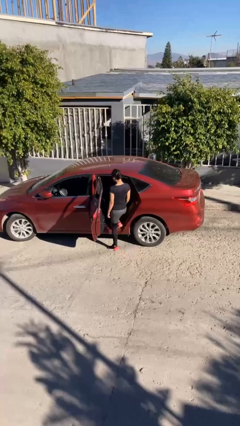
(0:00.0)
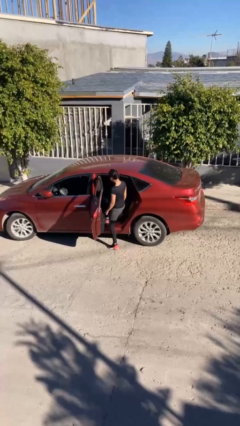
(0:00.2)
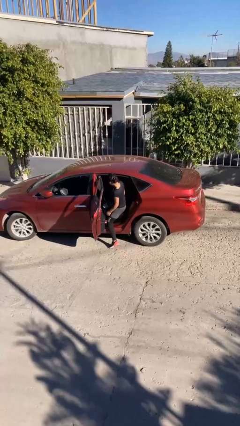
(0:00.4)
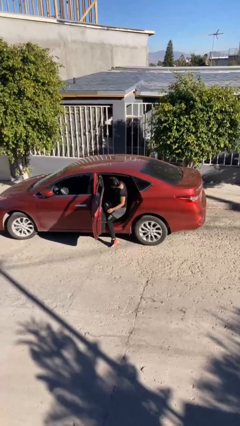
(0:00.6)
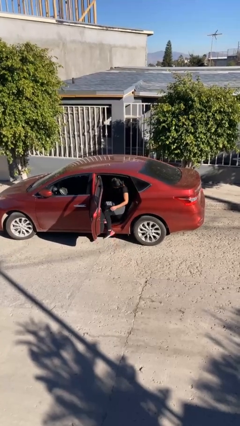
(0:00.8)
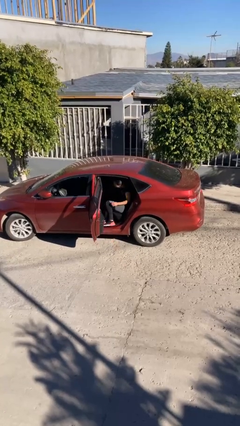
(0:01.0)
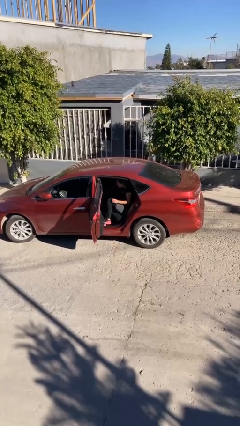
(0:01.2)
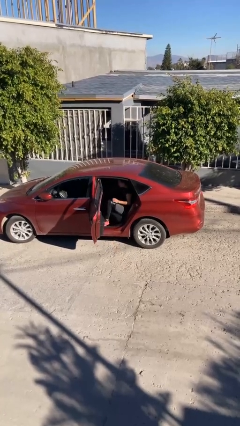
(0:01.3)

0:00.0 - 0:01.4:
person enters car

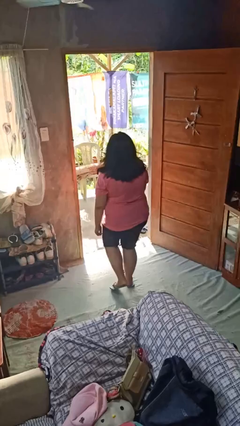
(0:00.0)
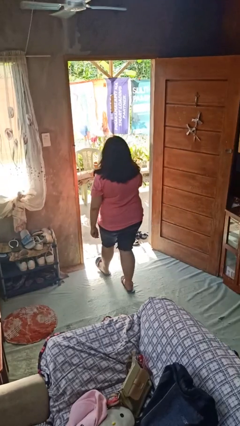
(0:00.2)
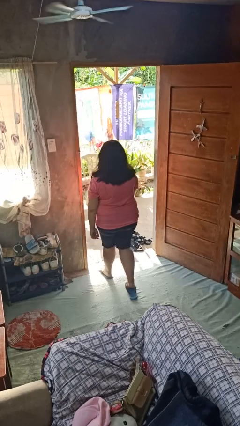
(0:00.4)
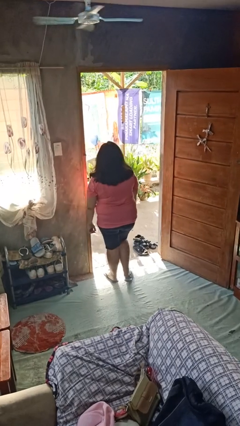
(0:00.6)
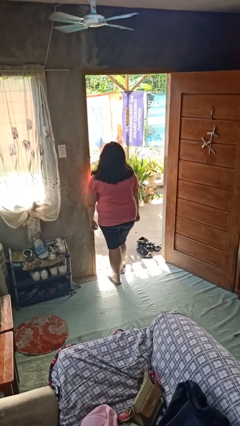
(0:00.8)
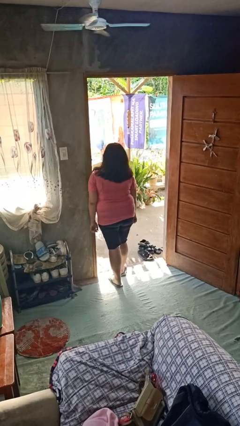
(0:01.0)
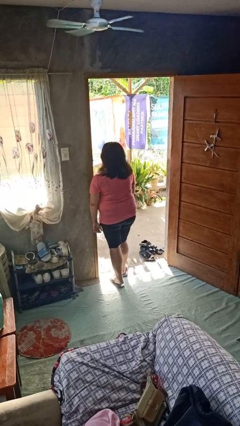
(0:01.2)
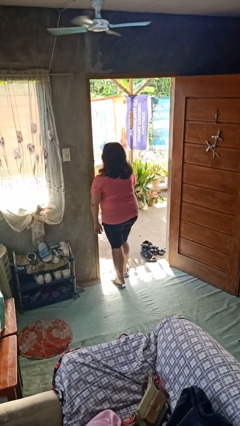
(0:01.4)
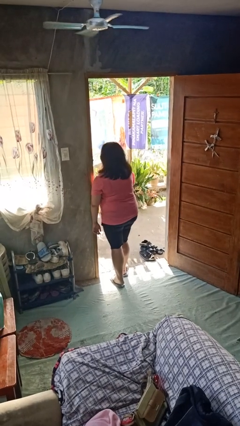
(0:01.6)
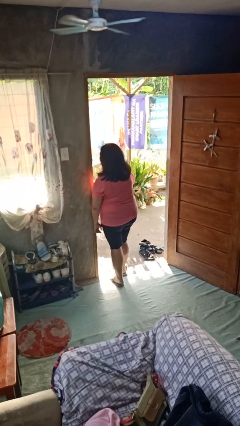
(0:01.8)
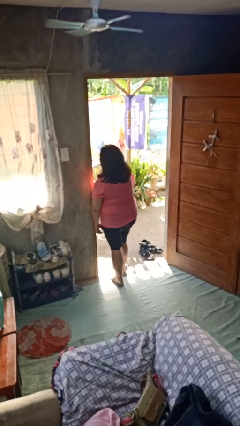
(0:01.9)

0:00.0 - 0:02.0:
person bumps into wall

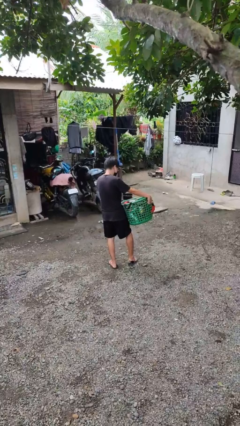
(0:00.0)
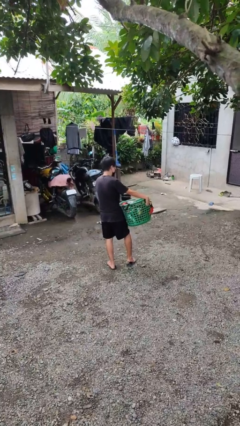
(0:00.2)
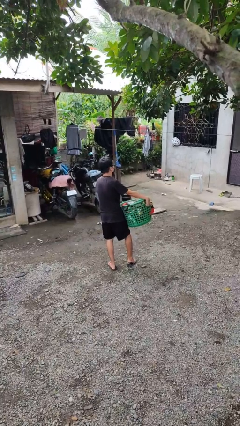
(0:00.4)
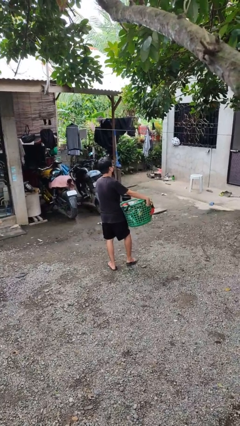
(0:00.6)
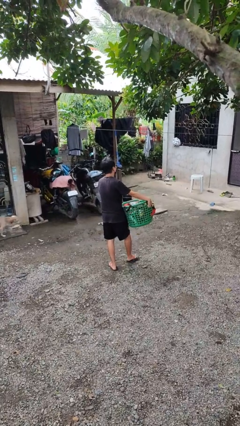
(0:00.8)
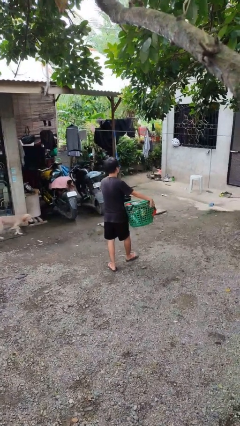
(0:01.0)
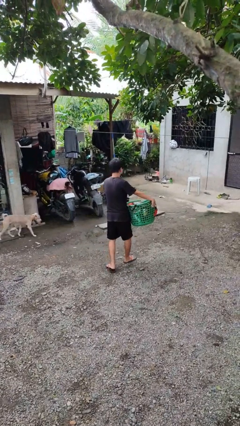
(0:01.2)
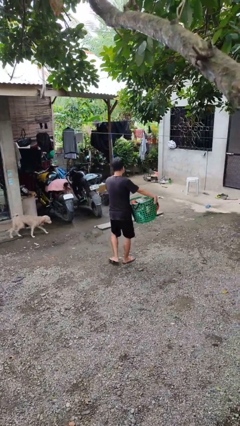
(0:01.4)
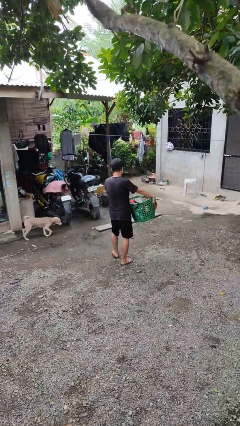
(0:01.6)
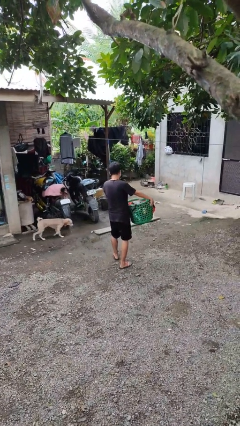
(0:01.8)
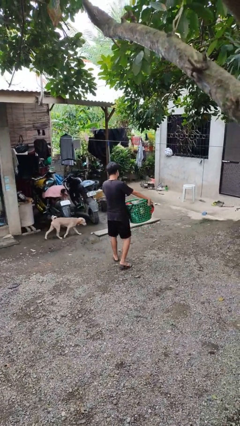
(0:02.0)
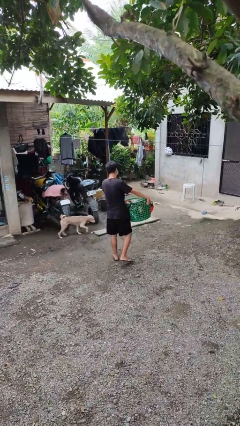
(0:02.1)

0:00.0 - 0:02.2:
person carries laundry basket

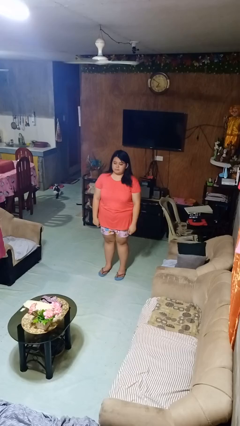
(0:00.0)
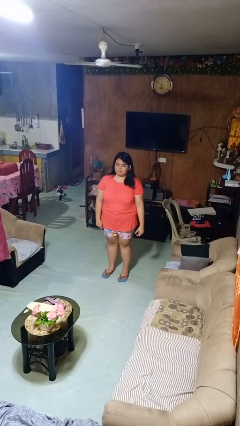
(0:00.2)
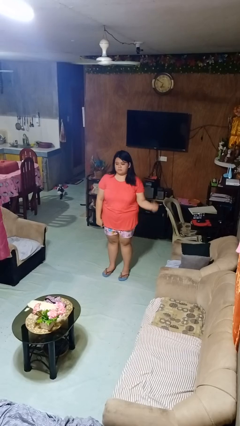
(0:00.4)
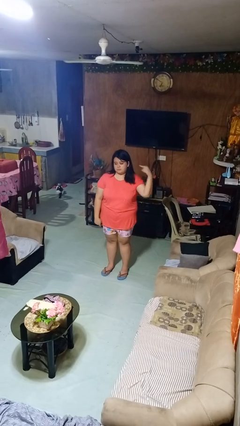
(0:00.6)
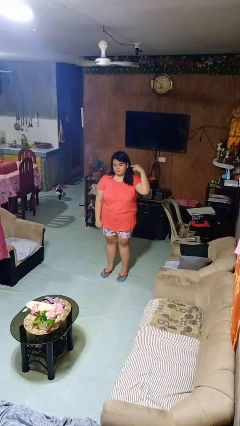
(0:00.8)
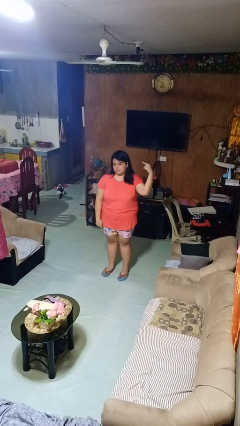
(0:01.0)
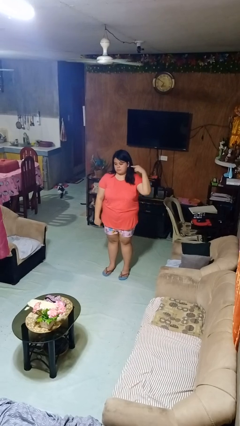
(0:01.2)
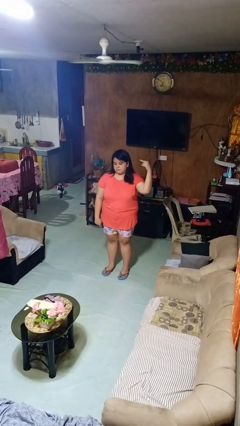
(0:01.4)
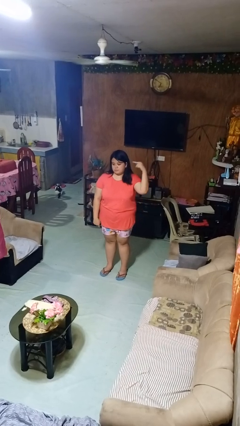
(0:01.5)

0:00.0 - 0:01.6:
person gestures listen closely

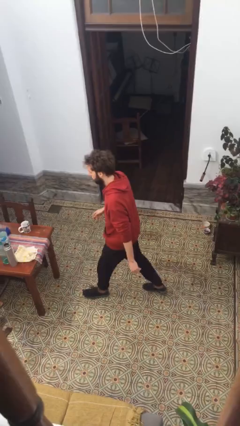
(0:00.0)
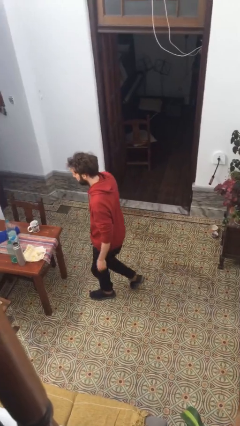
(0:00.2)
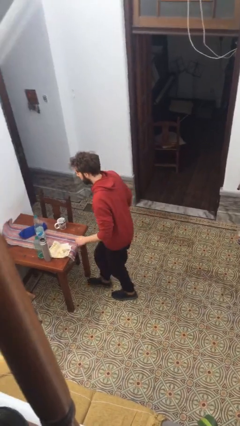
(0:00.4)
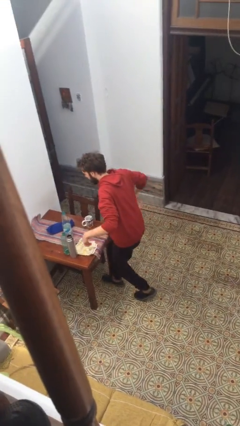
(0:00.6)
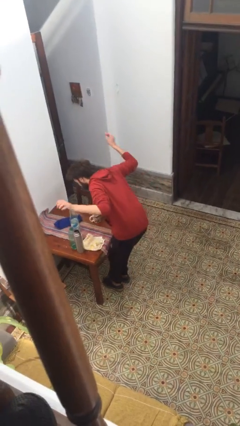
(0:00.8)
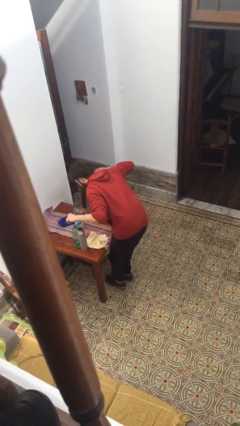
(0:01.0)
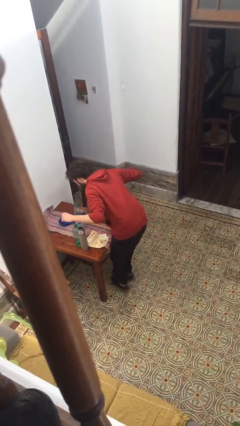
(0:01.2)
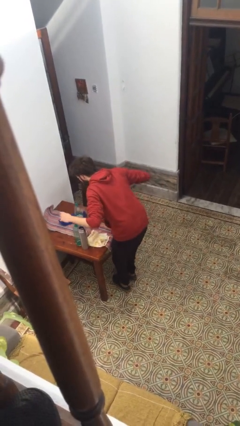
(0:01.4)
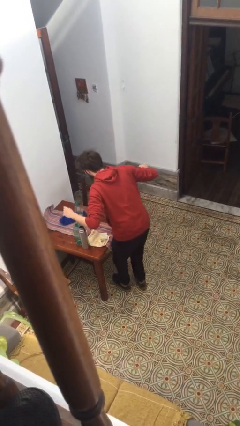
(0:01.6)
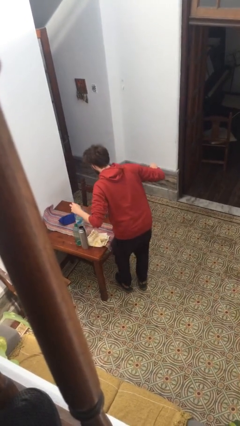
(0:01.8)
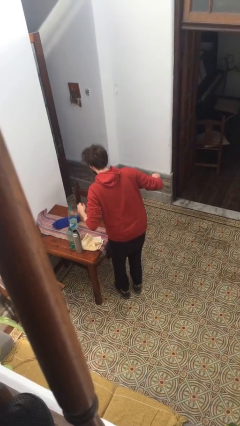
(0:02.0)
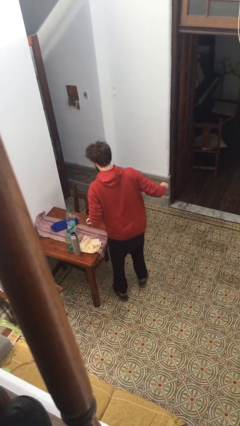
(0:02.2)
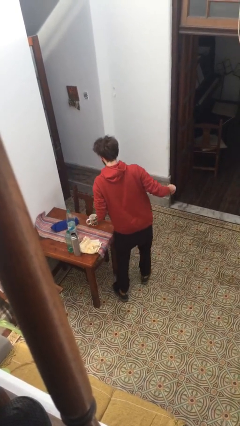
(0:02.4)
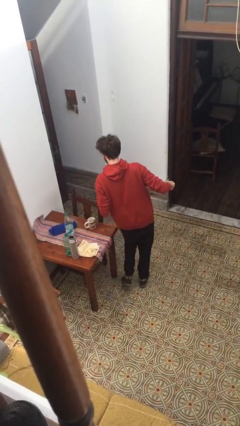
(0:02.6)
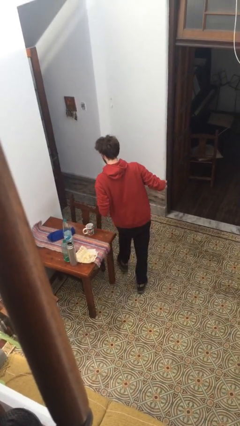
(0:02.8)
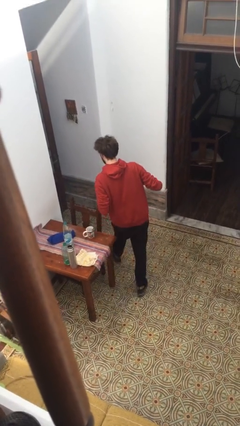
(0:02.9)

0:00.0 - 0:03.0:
person bumps into table

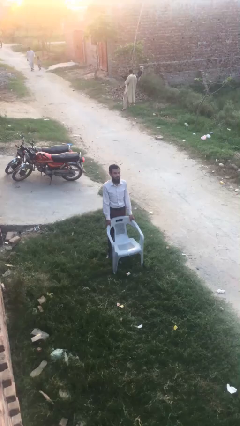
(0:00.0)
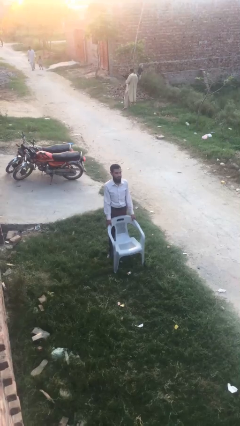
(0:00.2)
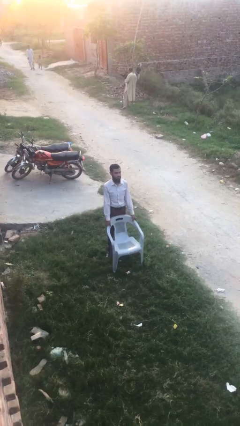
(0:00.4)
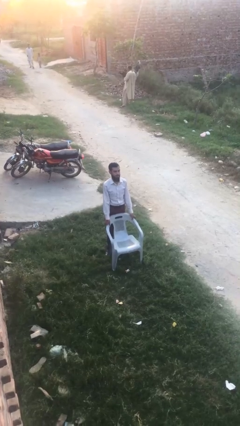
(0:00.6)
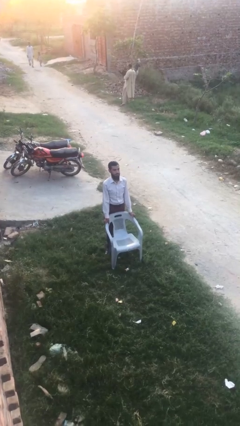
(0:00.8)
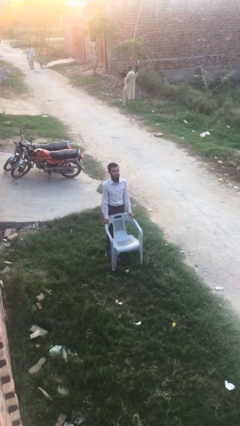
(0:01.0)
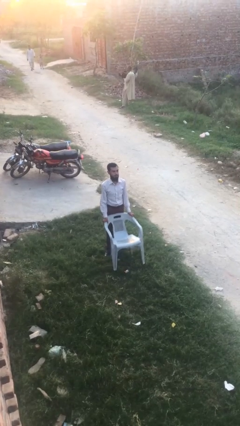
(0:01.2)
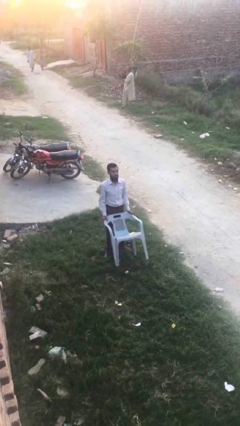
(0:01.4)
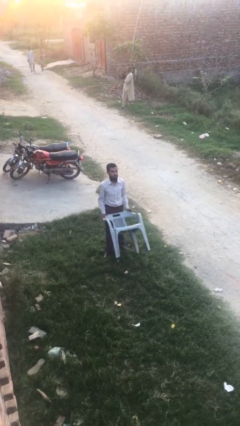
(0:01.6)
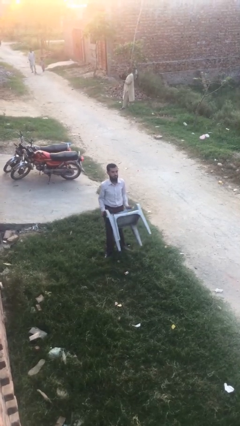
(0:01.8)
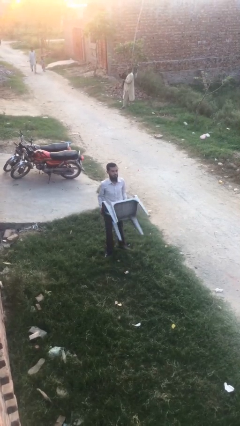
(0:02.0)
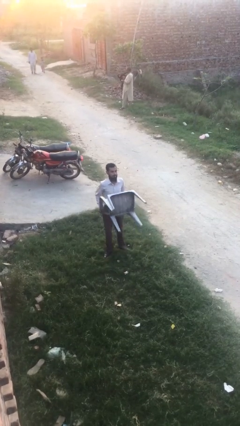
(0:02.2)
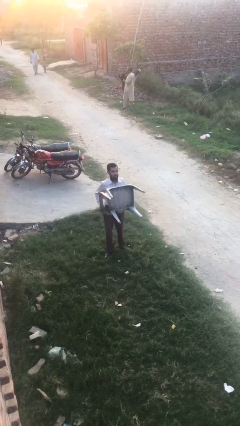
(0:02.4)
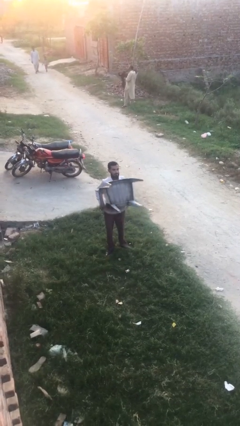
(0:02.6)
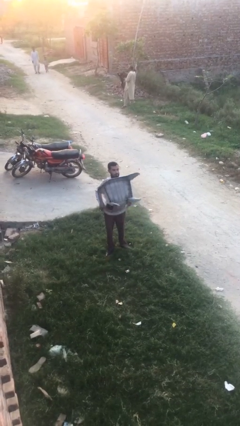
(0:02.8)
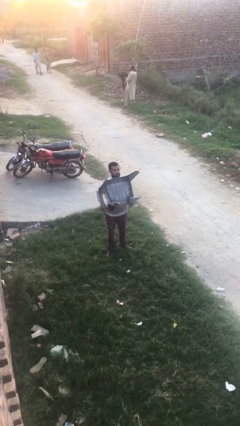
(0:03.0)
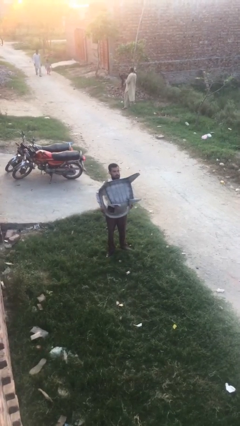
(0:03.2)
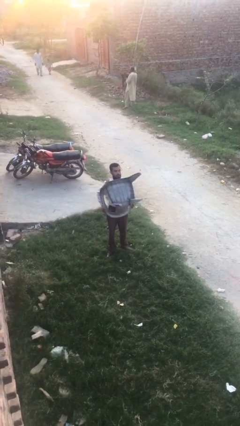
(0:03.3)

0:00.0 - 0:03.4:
person picks up object from floor

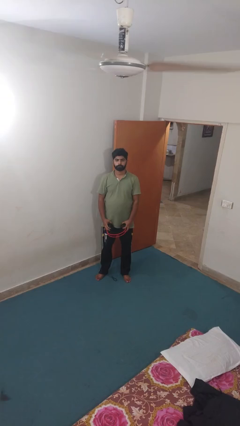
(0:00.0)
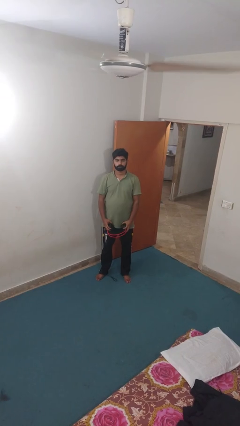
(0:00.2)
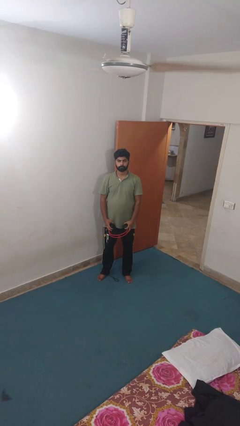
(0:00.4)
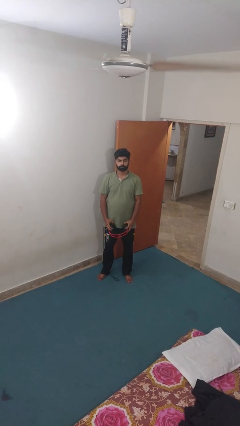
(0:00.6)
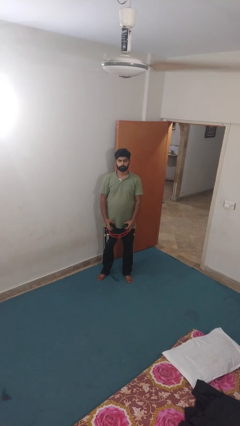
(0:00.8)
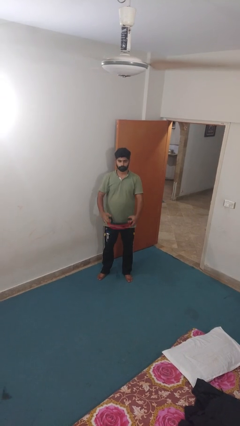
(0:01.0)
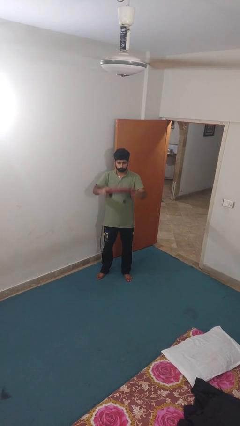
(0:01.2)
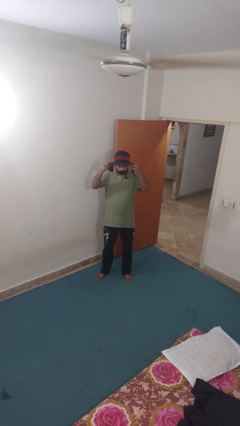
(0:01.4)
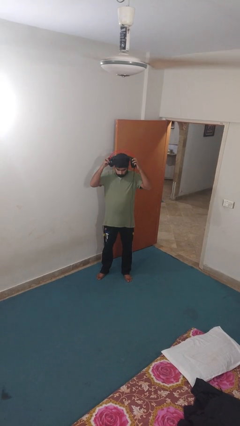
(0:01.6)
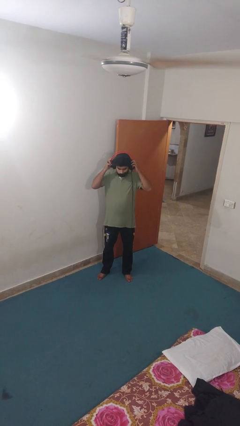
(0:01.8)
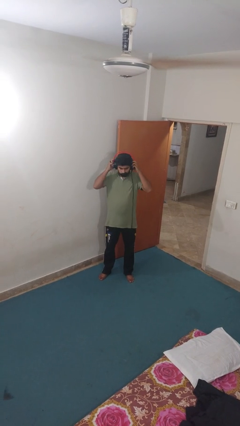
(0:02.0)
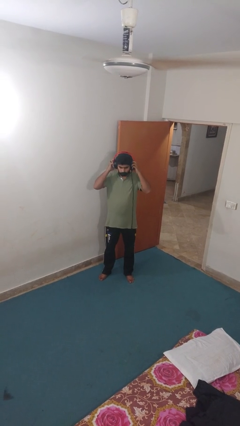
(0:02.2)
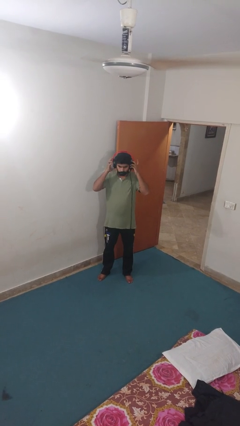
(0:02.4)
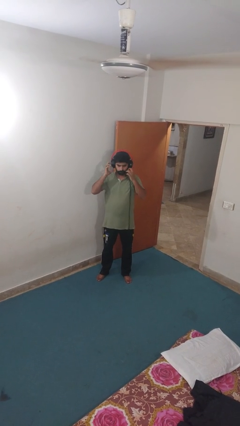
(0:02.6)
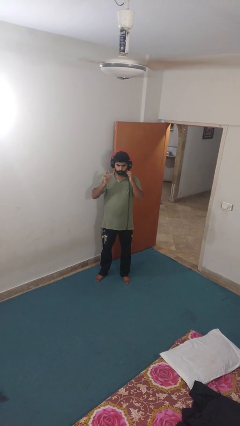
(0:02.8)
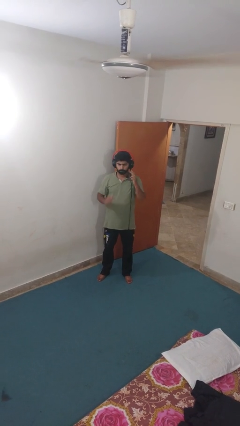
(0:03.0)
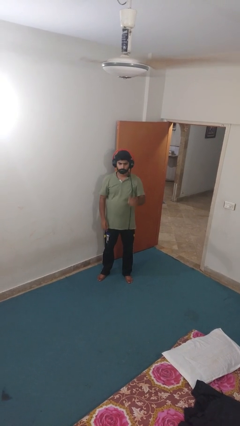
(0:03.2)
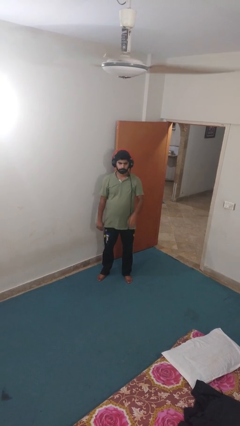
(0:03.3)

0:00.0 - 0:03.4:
person puts on headphones
